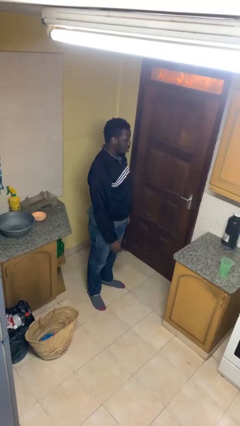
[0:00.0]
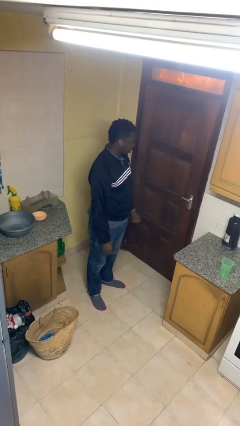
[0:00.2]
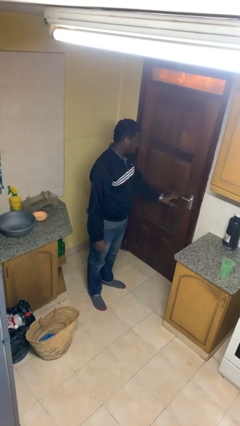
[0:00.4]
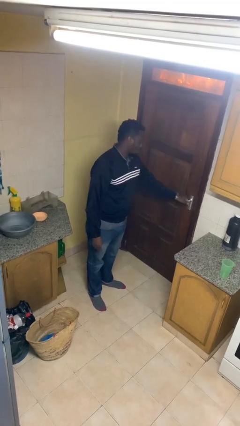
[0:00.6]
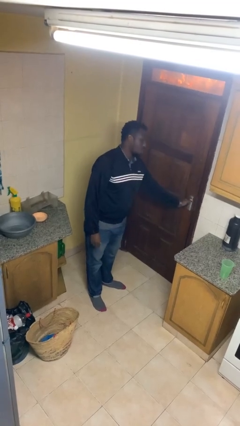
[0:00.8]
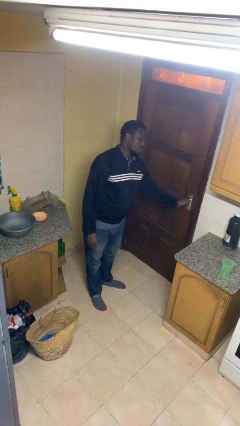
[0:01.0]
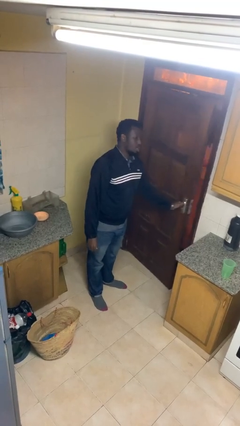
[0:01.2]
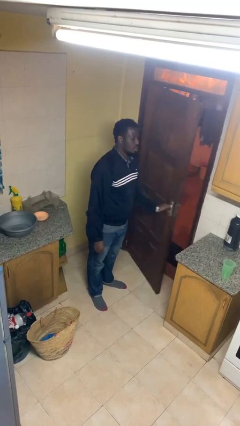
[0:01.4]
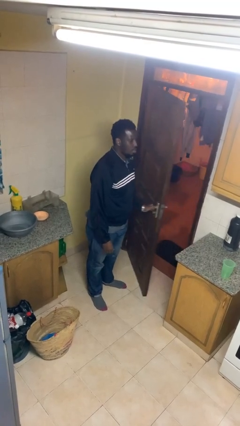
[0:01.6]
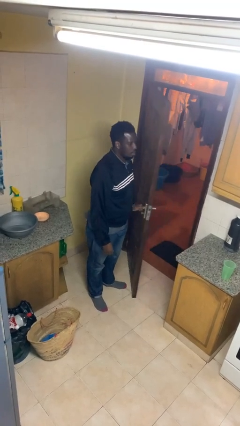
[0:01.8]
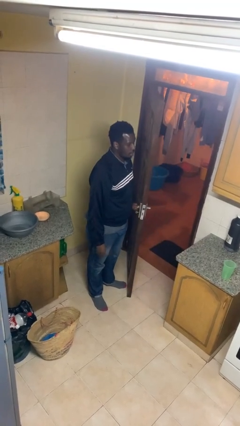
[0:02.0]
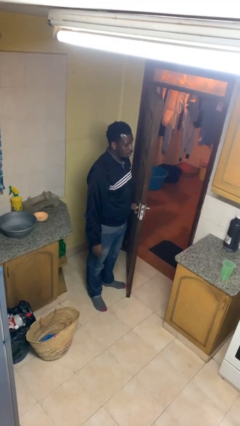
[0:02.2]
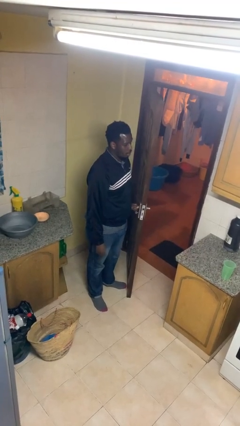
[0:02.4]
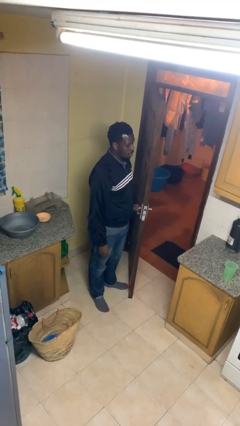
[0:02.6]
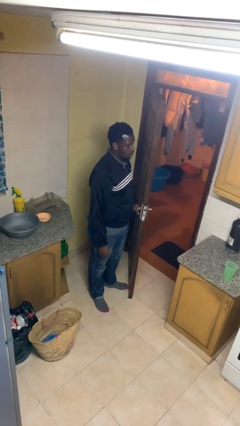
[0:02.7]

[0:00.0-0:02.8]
person opens facility door

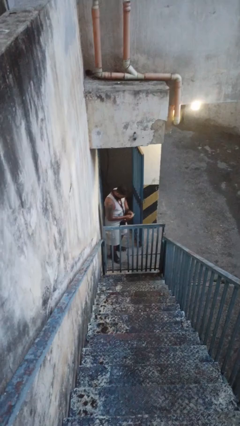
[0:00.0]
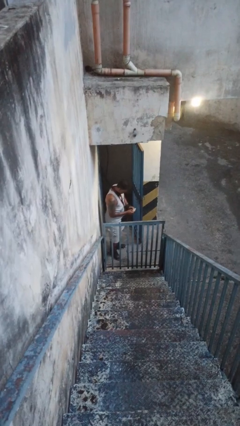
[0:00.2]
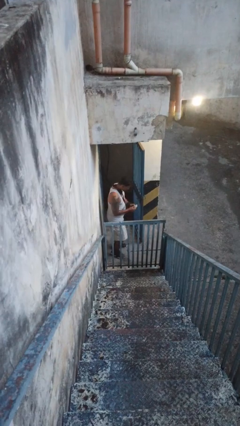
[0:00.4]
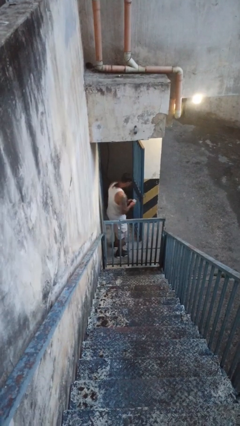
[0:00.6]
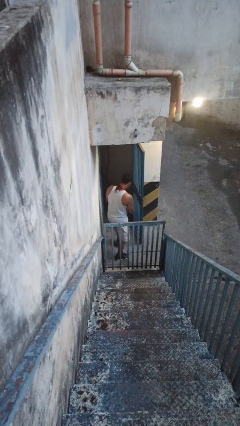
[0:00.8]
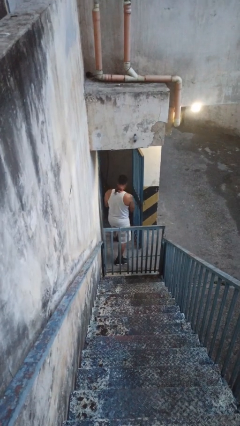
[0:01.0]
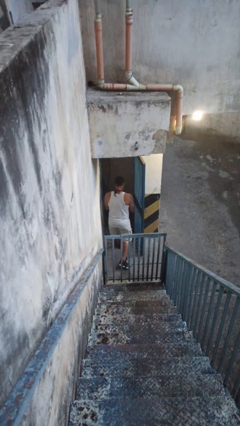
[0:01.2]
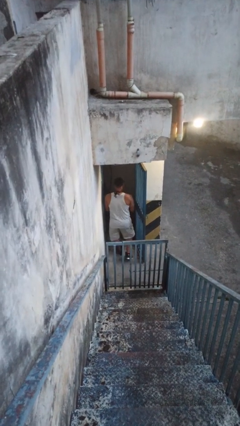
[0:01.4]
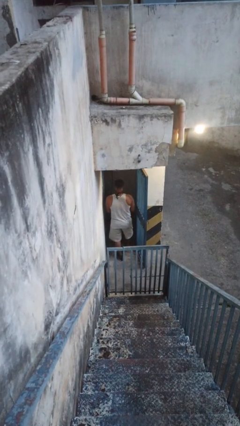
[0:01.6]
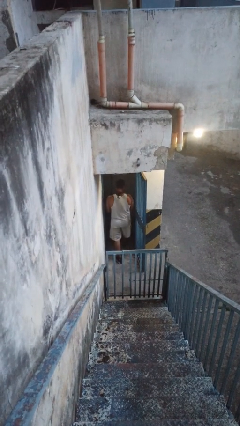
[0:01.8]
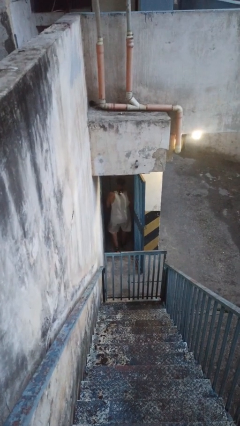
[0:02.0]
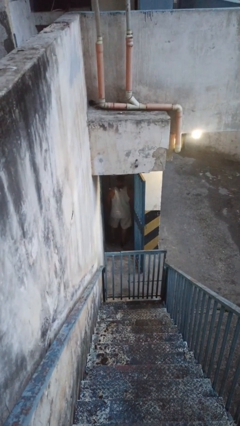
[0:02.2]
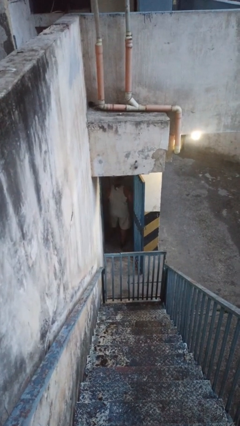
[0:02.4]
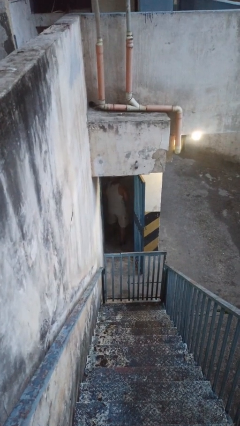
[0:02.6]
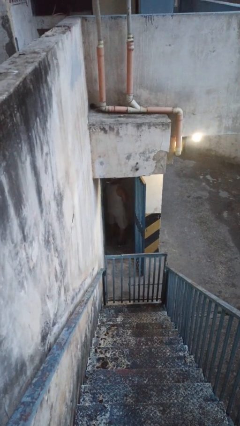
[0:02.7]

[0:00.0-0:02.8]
person exits scene through structure

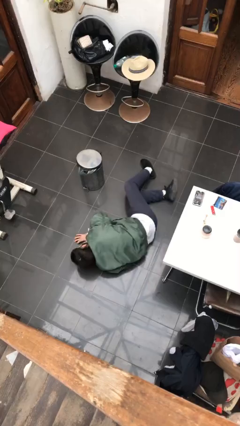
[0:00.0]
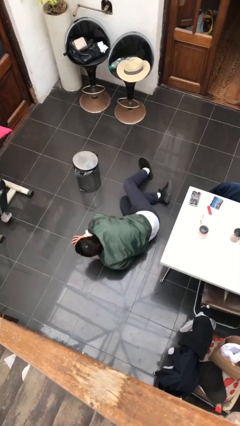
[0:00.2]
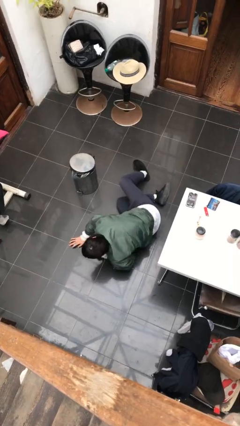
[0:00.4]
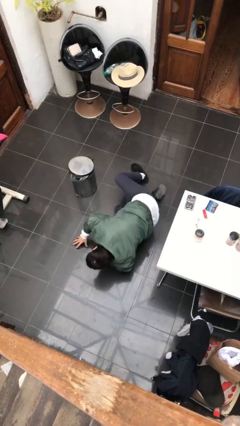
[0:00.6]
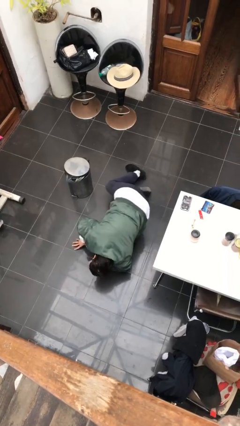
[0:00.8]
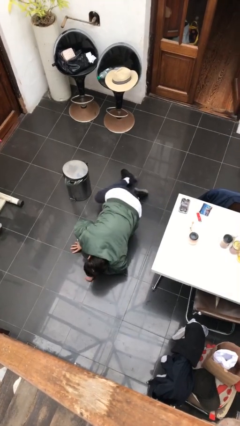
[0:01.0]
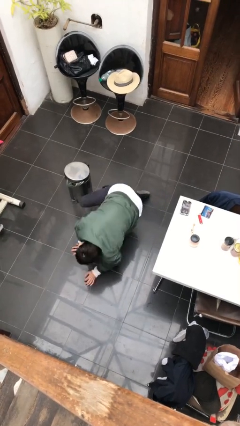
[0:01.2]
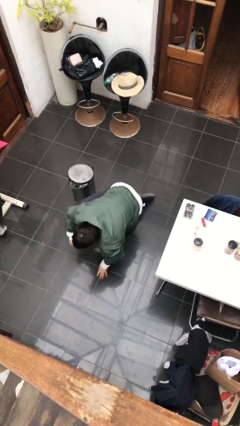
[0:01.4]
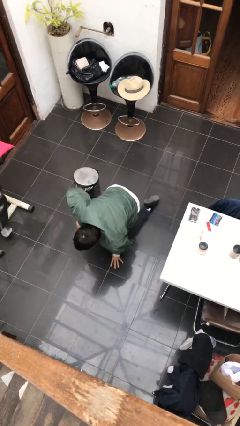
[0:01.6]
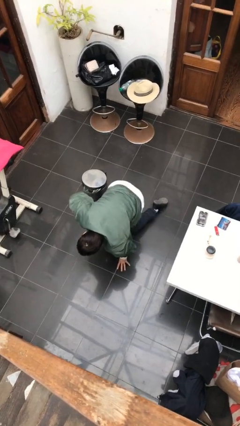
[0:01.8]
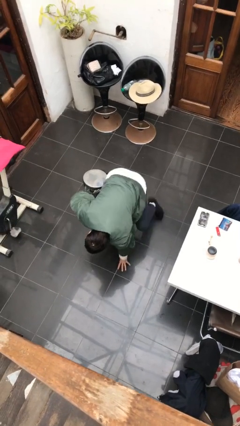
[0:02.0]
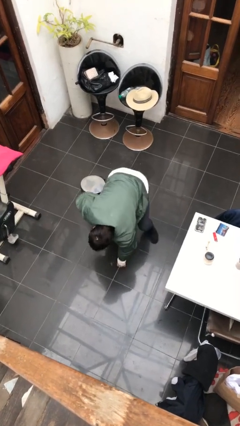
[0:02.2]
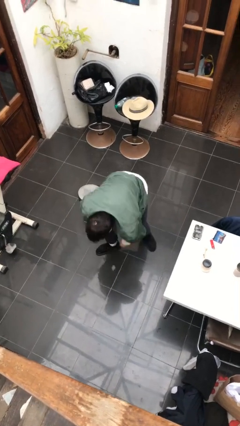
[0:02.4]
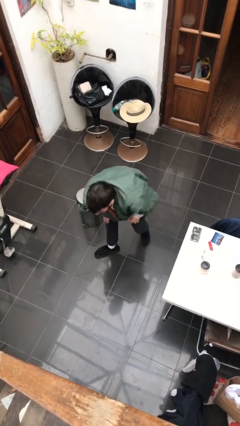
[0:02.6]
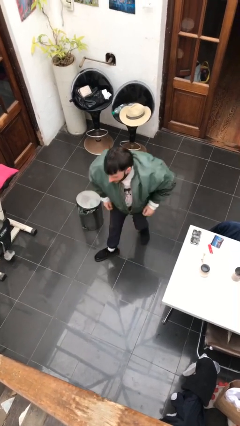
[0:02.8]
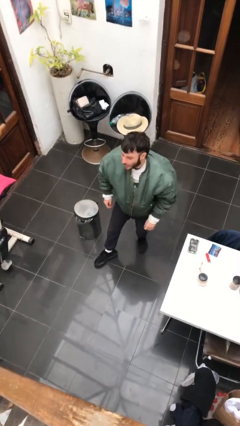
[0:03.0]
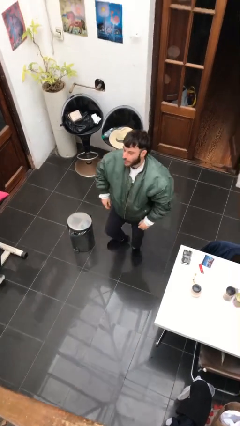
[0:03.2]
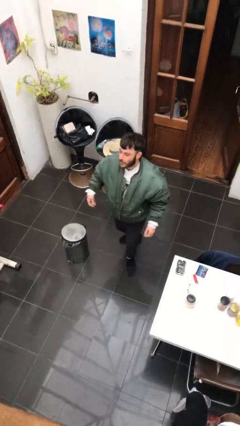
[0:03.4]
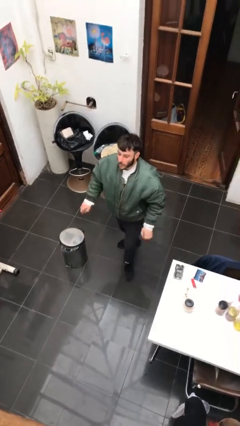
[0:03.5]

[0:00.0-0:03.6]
person stands up from floor

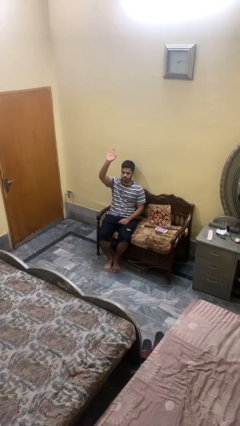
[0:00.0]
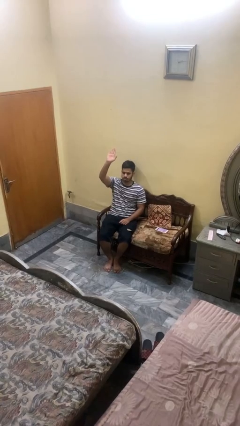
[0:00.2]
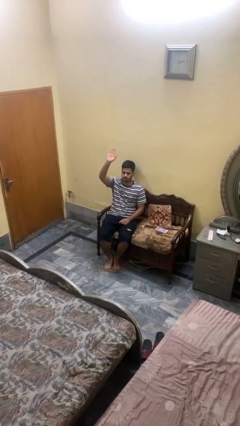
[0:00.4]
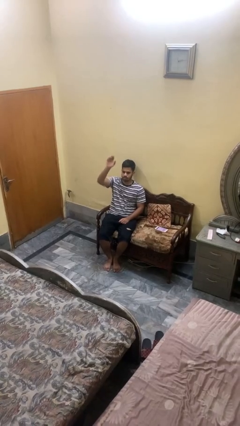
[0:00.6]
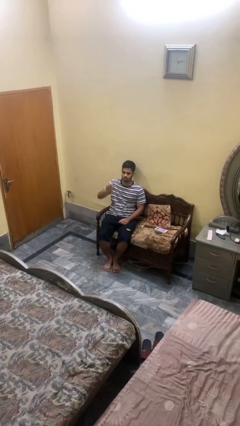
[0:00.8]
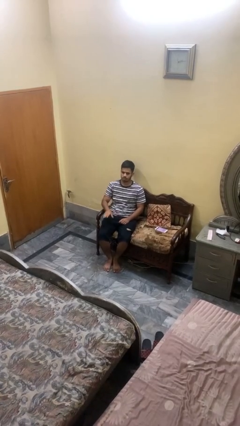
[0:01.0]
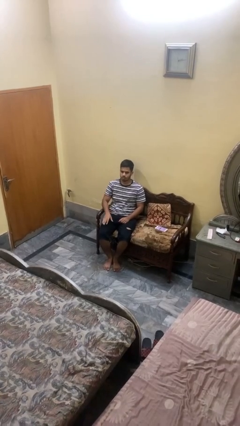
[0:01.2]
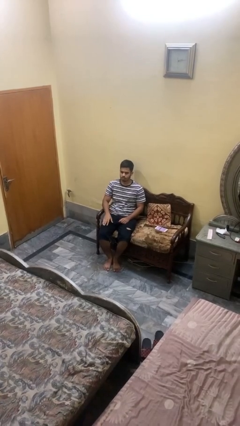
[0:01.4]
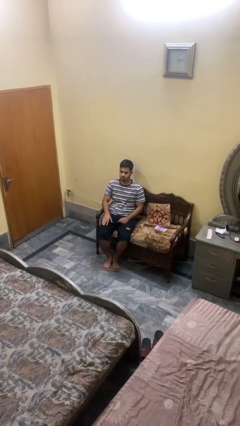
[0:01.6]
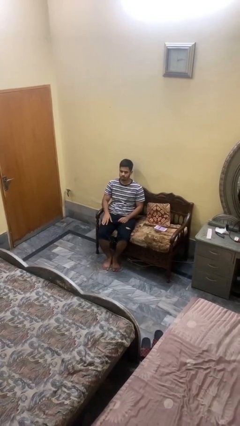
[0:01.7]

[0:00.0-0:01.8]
person gestures lower hand

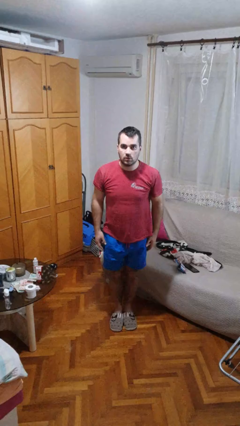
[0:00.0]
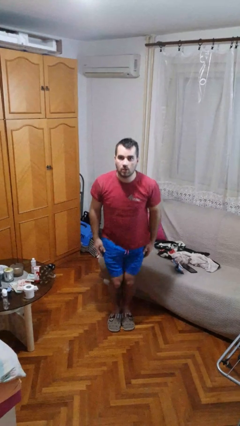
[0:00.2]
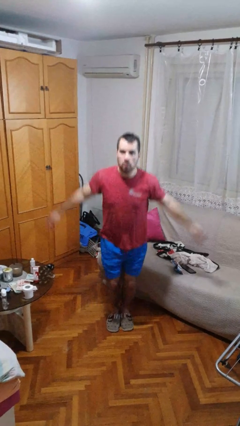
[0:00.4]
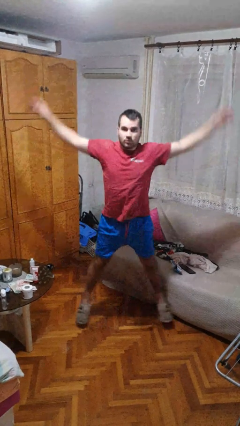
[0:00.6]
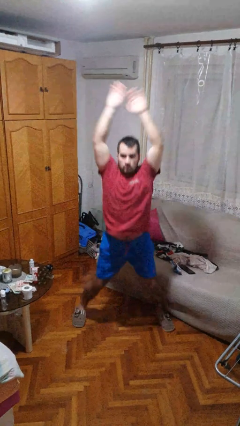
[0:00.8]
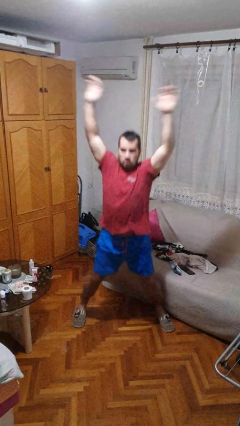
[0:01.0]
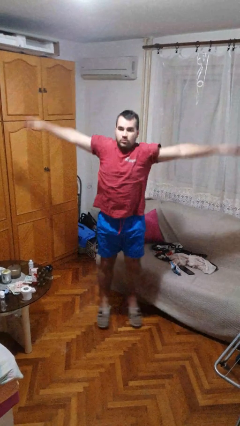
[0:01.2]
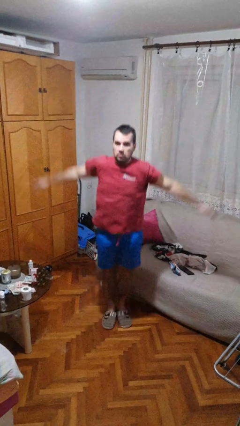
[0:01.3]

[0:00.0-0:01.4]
person exercises with jumping jacks

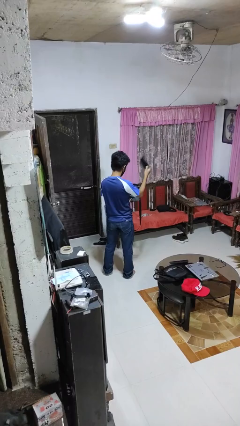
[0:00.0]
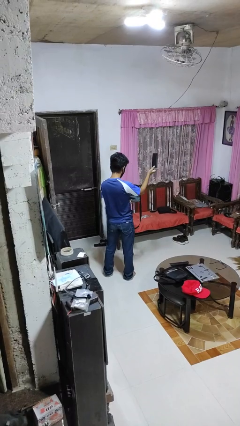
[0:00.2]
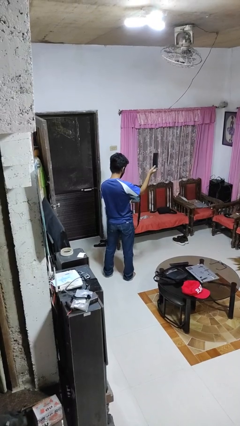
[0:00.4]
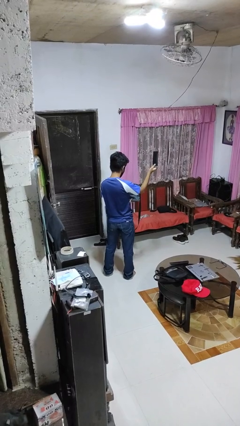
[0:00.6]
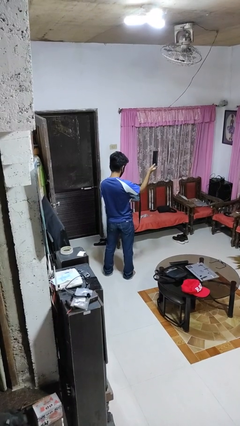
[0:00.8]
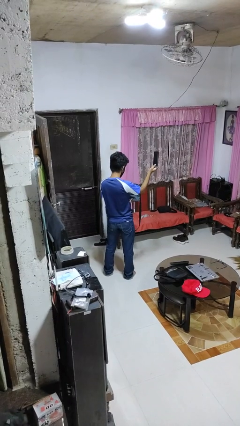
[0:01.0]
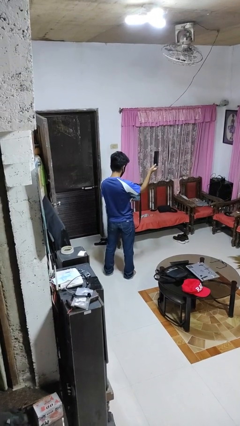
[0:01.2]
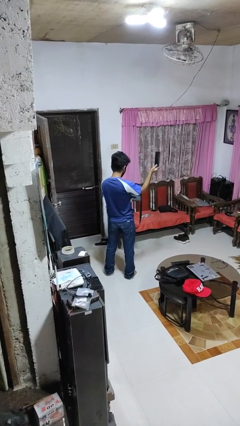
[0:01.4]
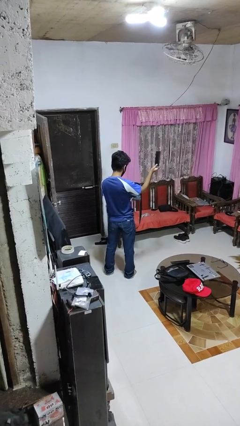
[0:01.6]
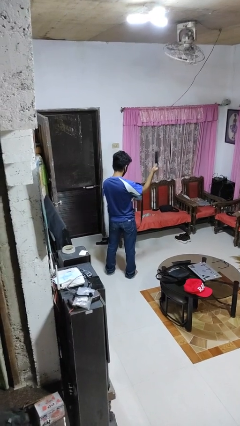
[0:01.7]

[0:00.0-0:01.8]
person takes object from purse

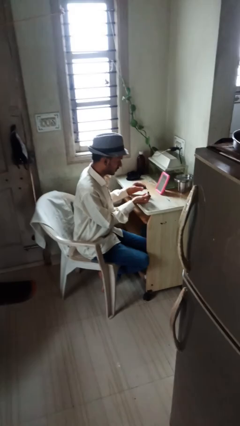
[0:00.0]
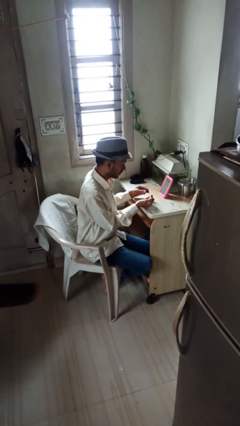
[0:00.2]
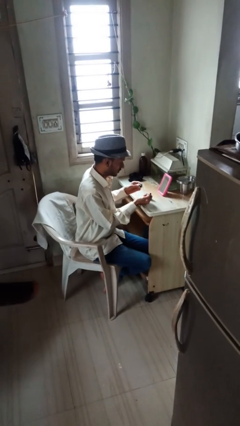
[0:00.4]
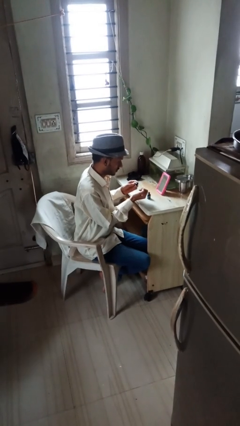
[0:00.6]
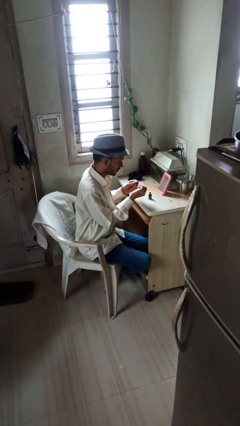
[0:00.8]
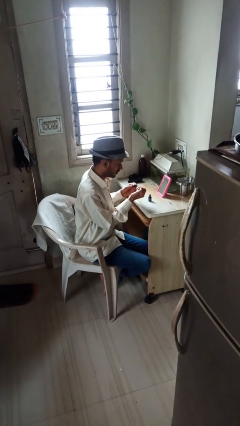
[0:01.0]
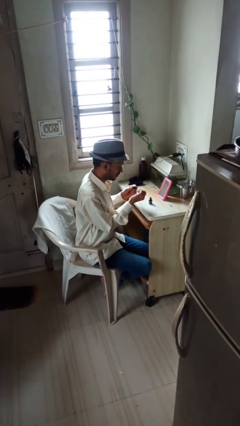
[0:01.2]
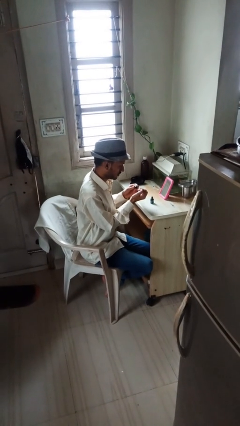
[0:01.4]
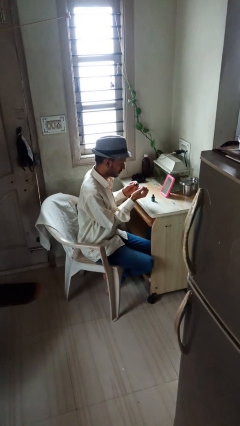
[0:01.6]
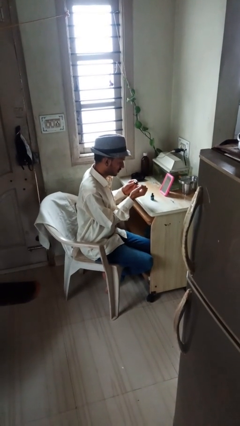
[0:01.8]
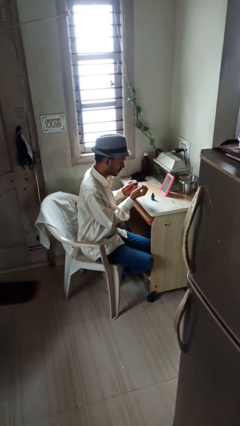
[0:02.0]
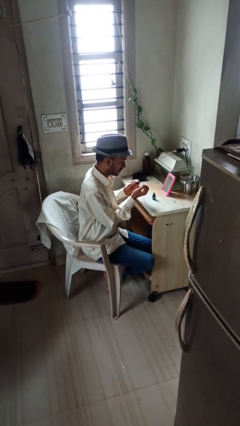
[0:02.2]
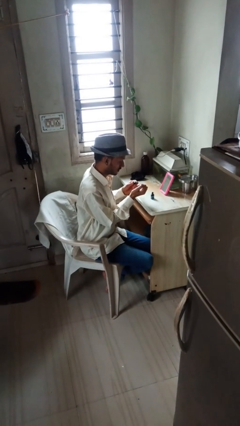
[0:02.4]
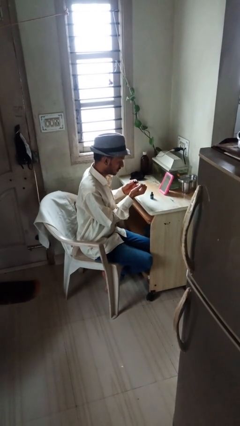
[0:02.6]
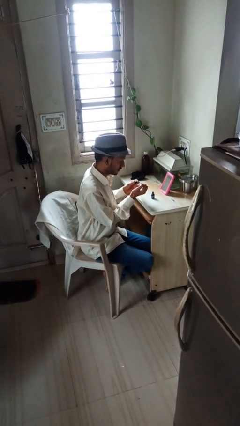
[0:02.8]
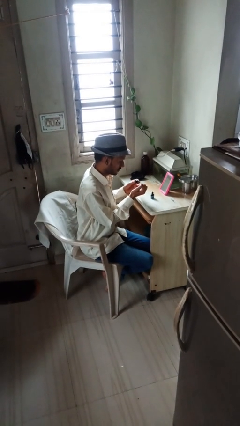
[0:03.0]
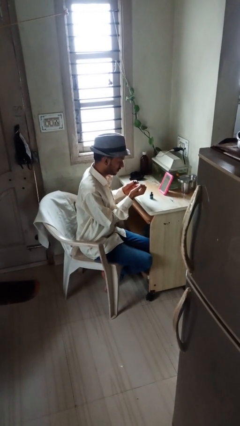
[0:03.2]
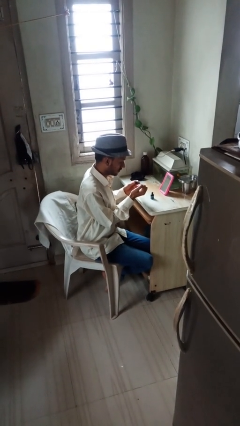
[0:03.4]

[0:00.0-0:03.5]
person paints fingernails
